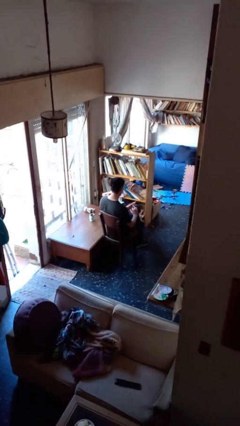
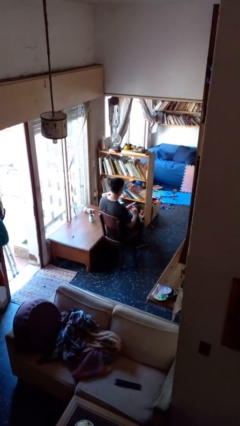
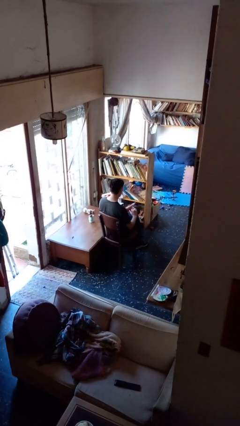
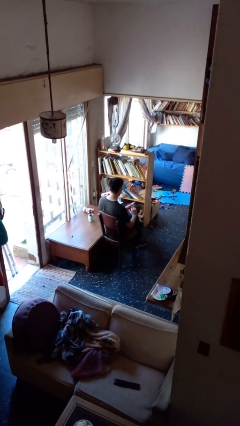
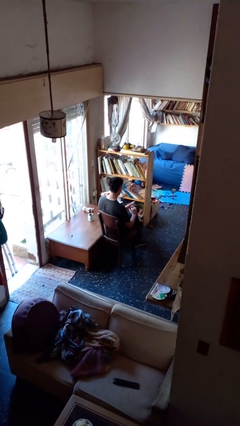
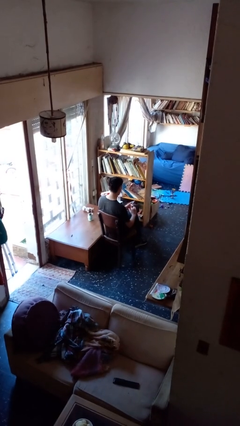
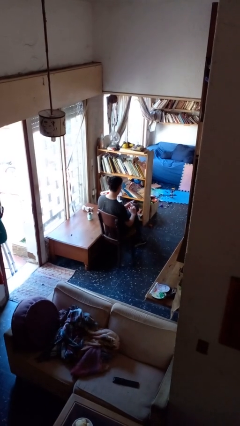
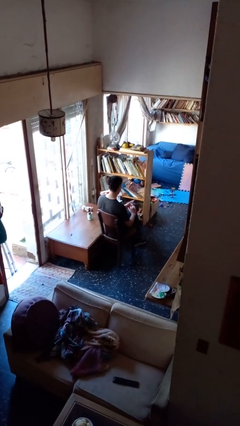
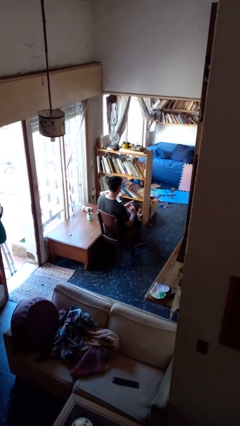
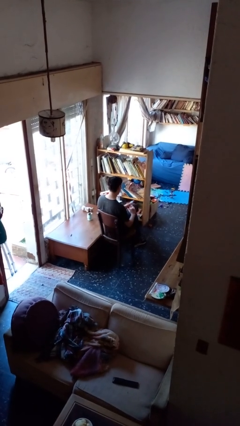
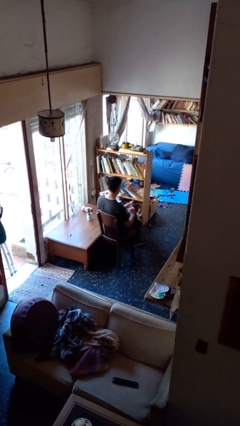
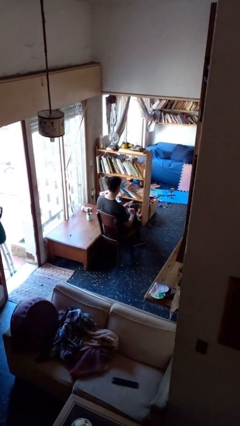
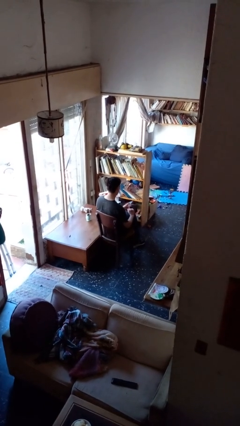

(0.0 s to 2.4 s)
person clips fingernails

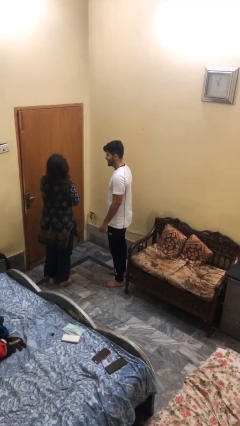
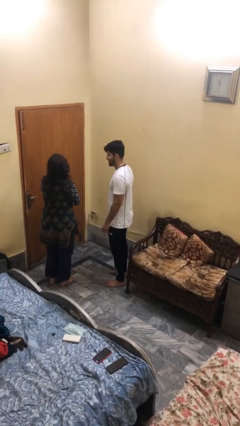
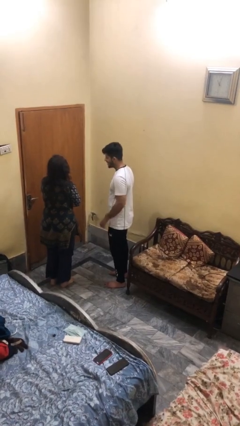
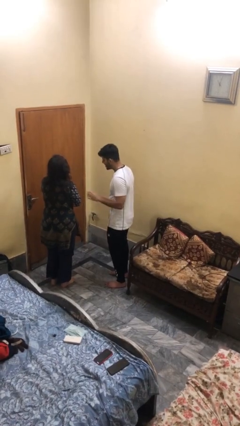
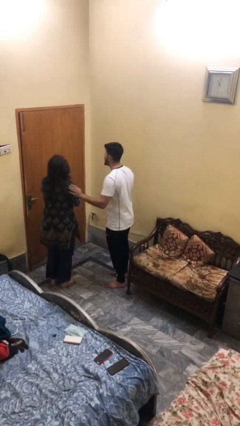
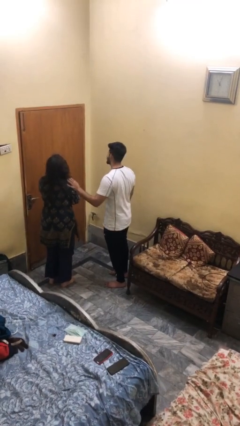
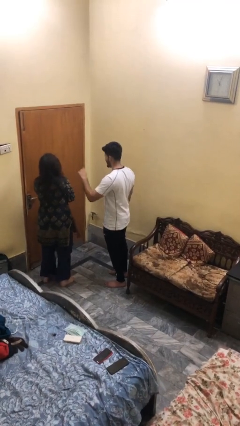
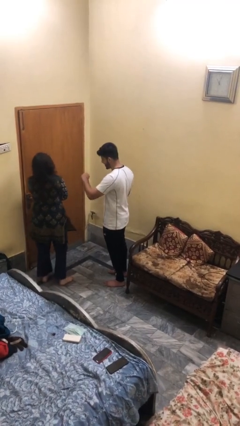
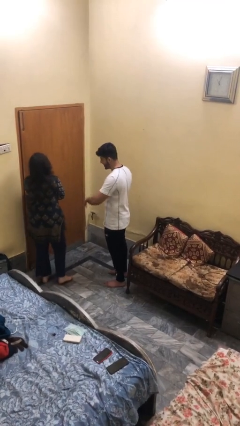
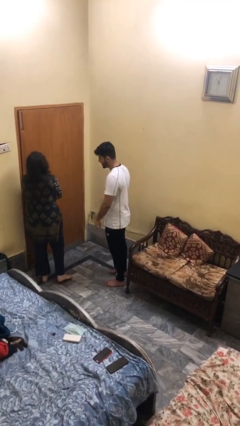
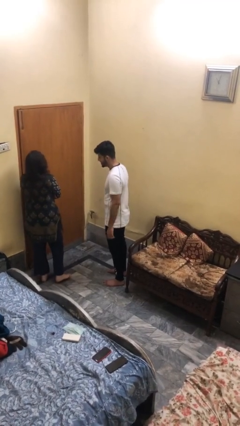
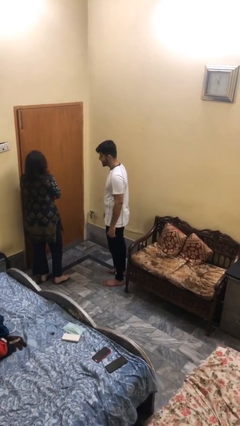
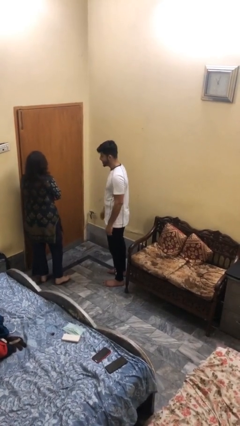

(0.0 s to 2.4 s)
person shoves person

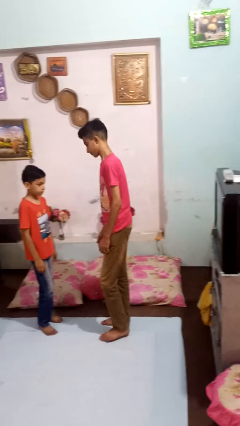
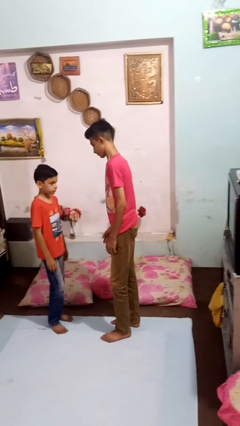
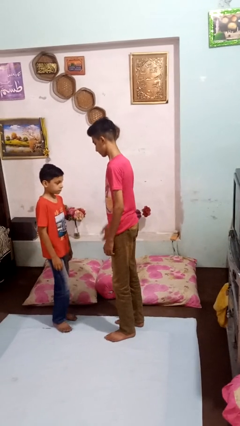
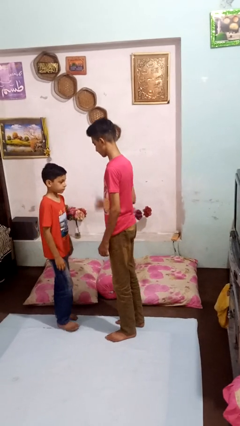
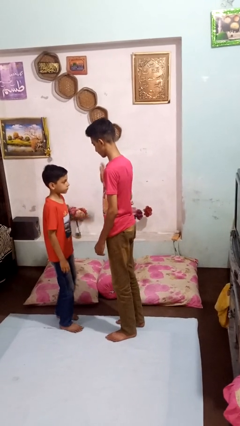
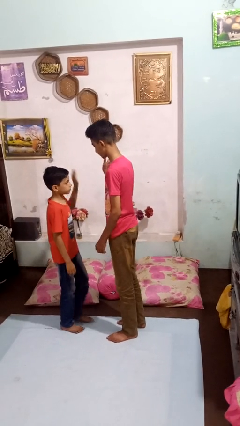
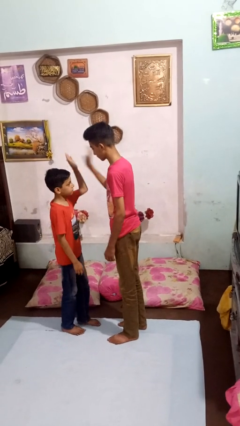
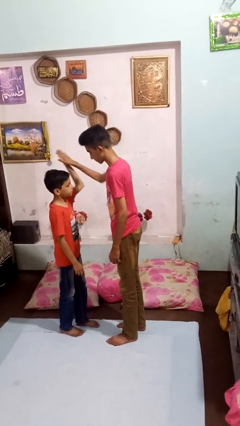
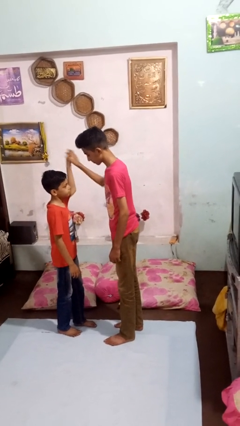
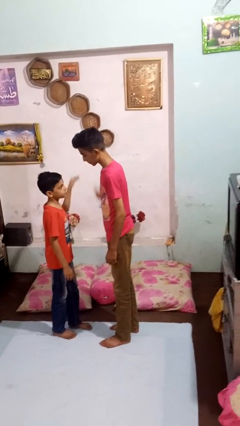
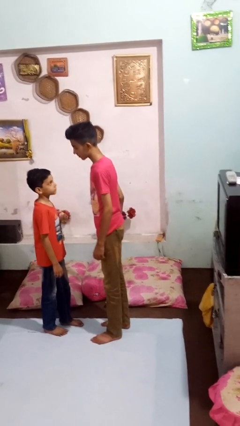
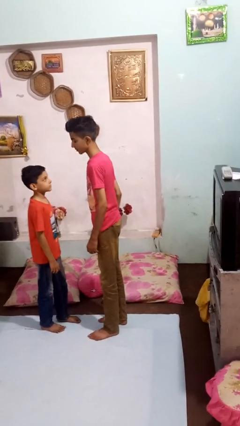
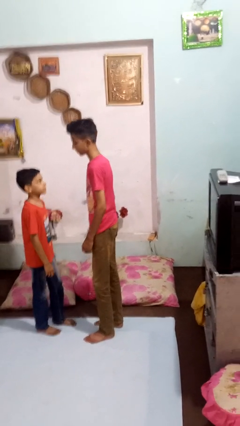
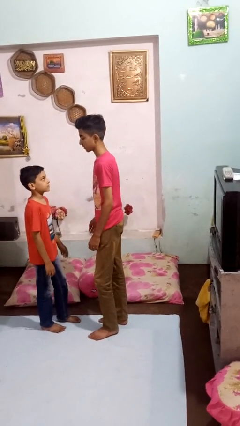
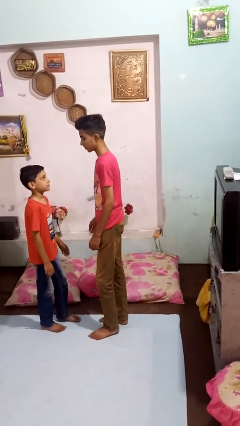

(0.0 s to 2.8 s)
person highfives hand

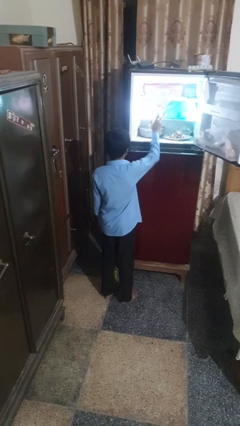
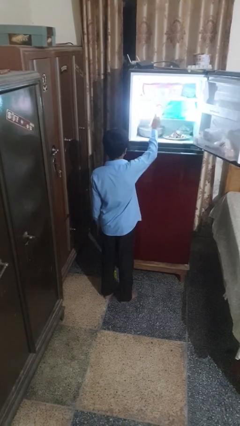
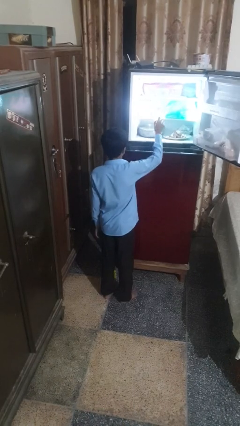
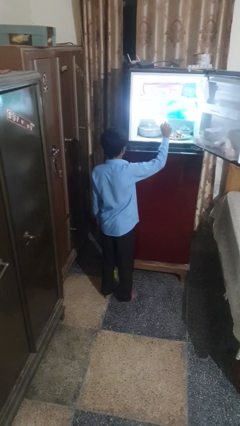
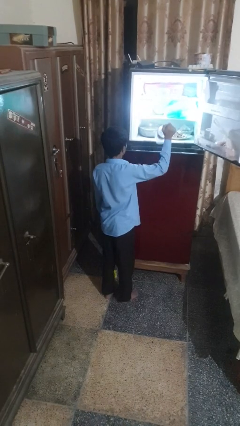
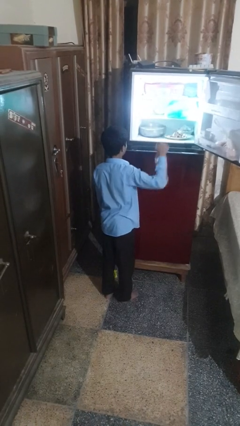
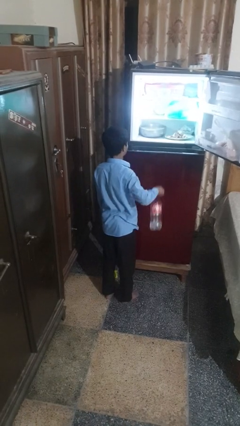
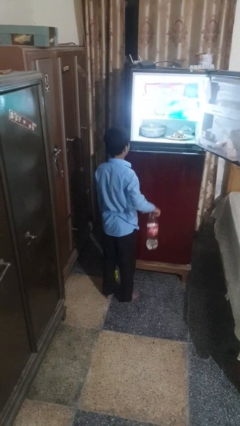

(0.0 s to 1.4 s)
person takes object from refrigerator

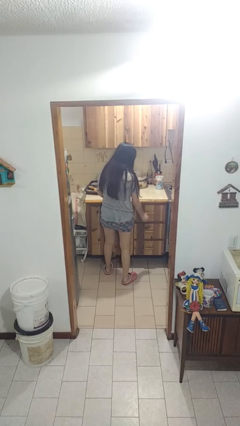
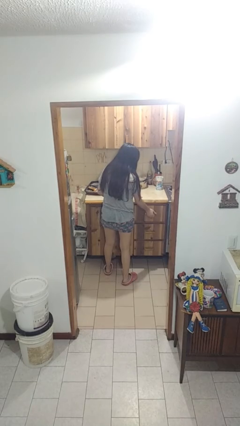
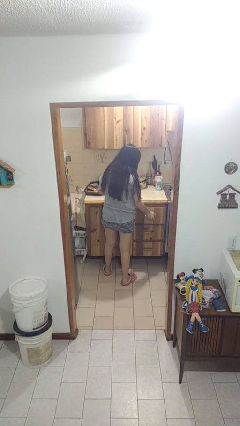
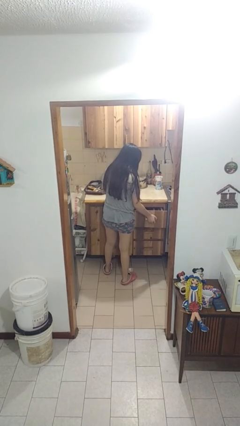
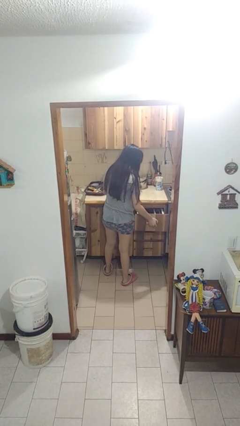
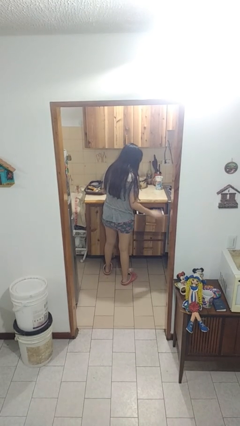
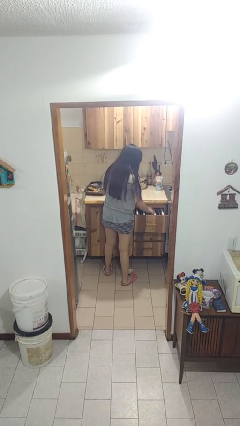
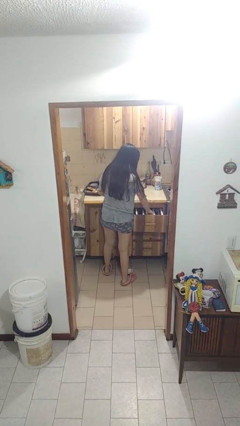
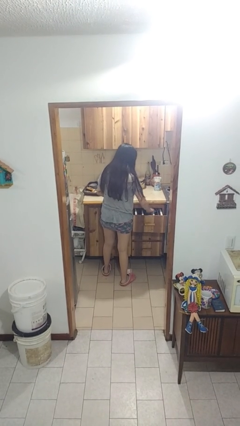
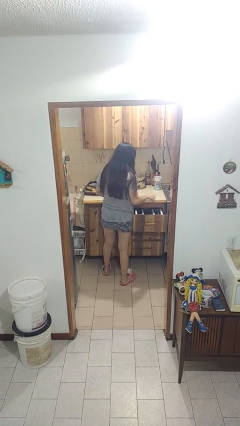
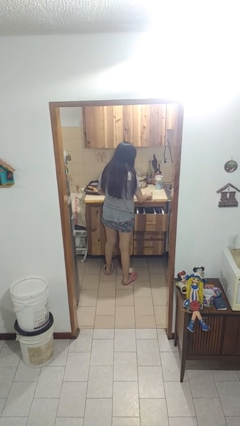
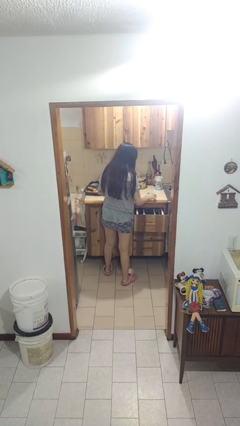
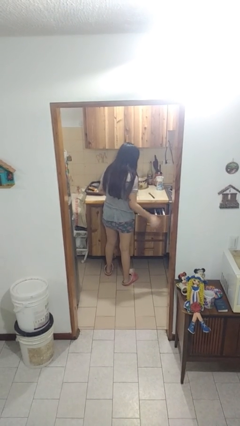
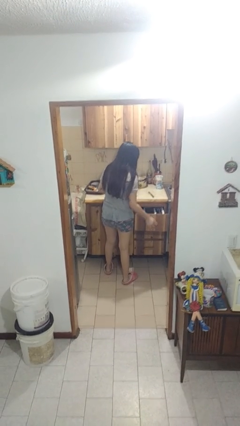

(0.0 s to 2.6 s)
person takes object from kitchen drawer

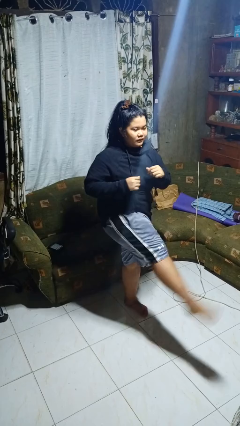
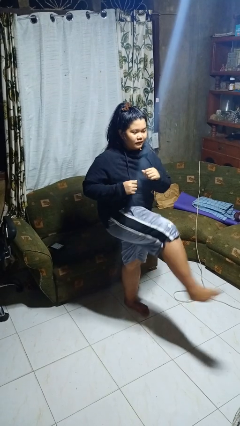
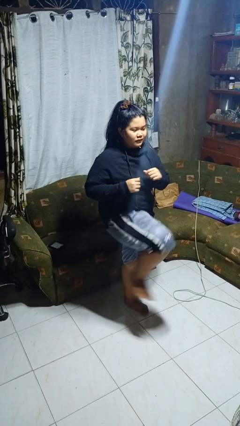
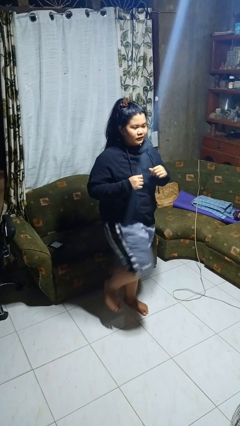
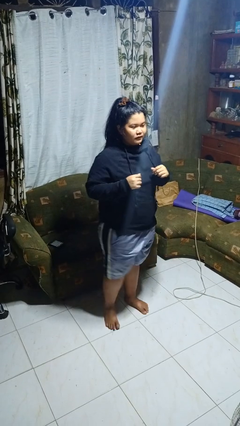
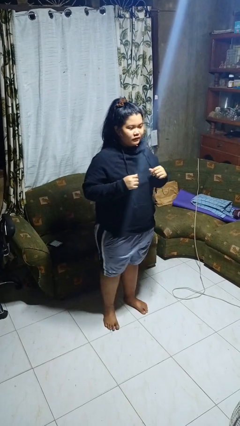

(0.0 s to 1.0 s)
person karate kicks

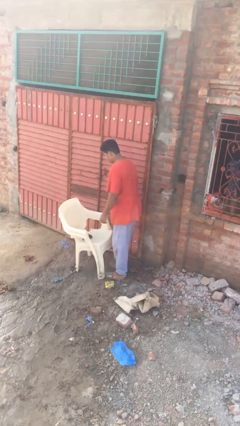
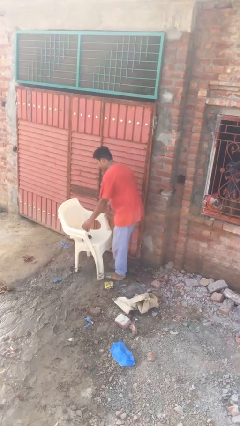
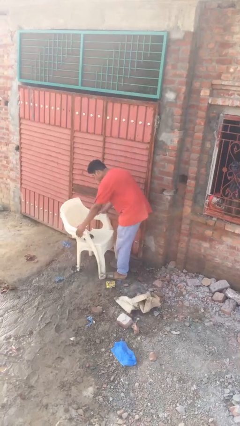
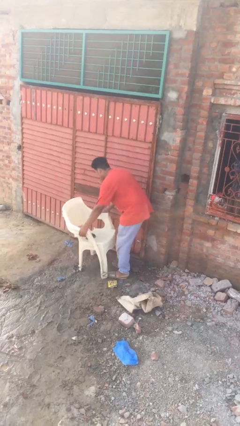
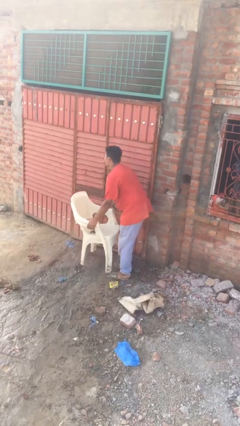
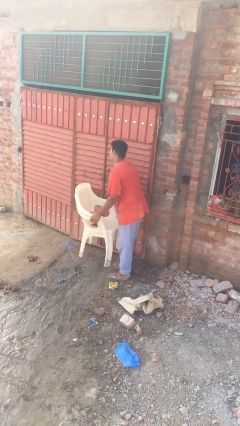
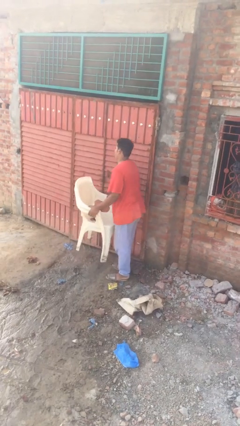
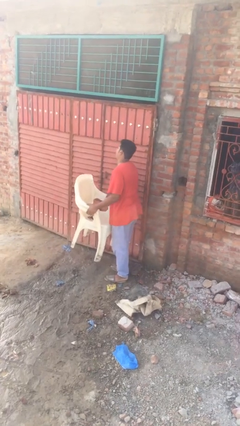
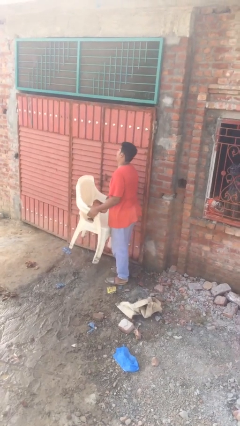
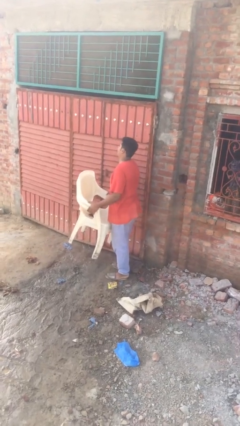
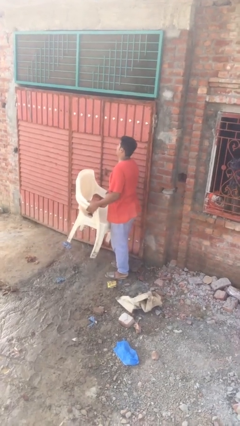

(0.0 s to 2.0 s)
person picks up object from floor

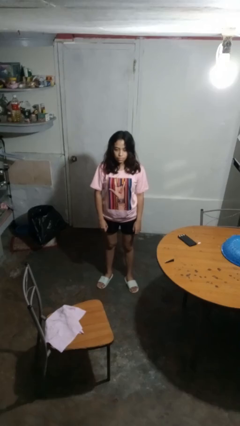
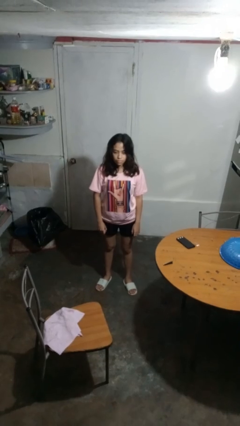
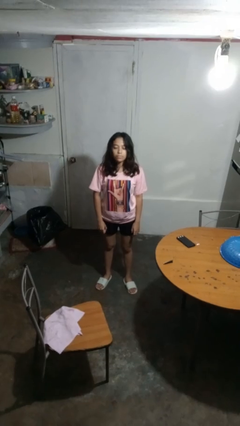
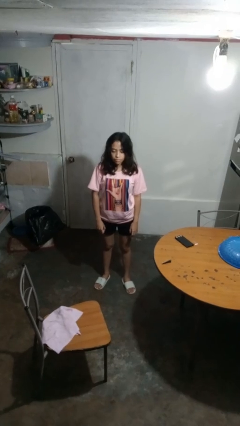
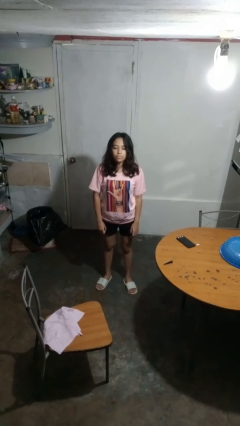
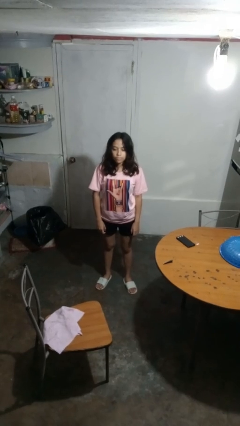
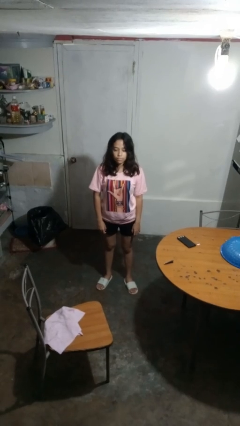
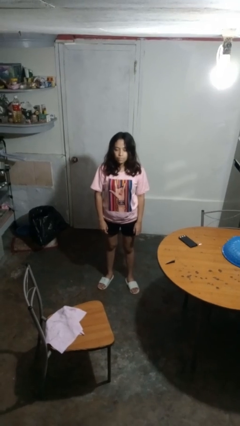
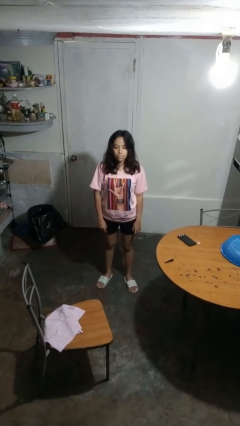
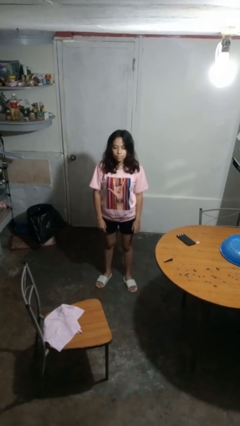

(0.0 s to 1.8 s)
person nods head

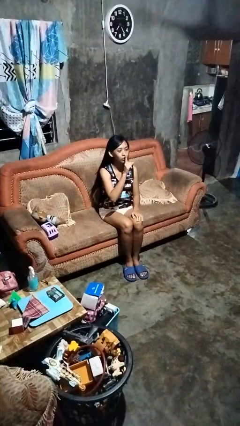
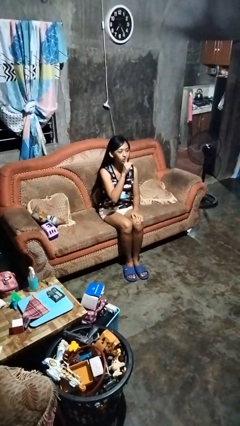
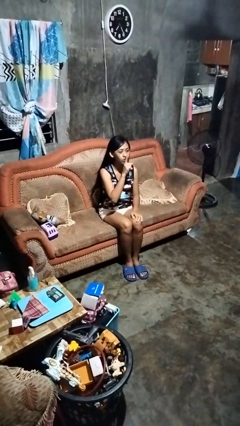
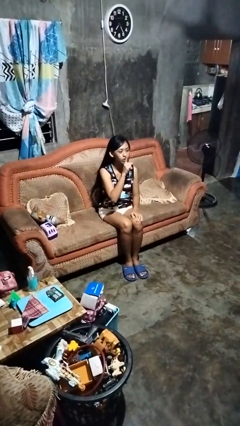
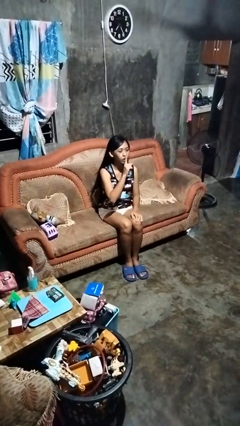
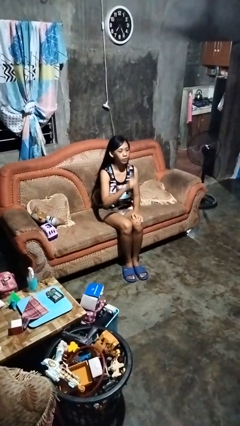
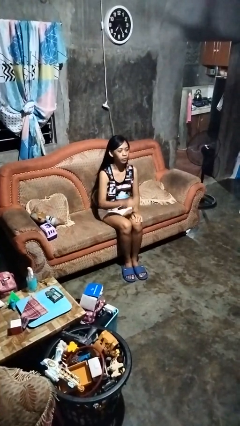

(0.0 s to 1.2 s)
person gestures be quiet
